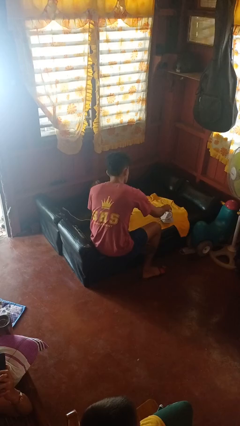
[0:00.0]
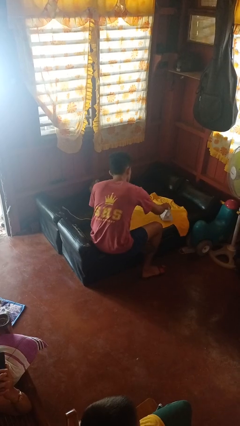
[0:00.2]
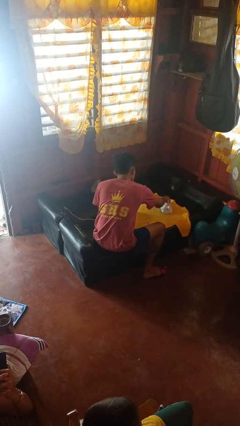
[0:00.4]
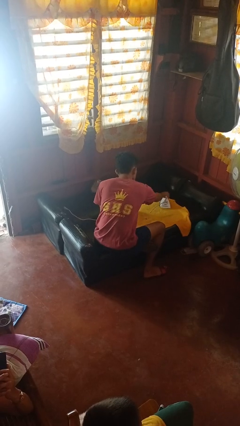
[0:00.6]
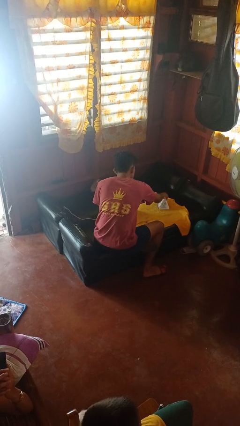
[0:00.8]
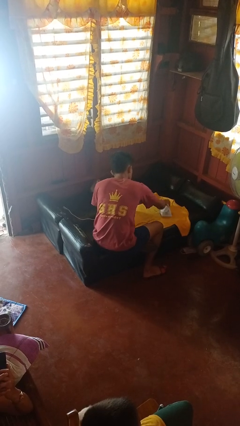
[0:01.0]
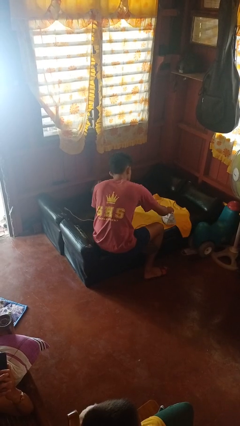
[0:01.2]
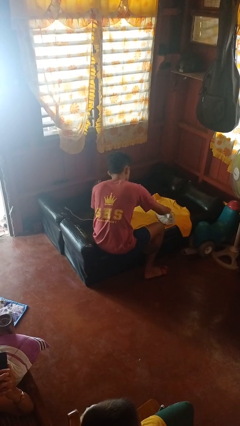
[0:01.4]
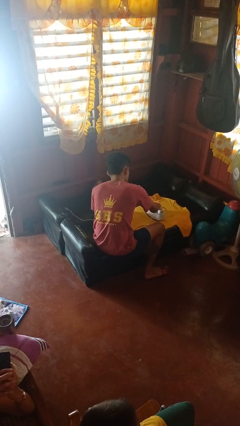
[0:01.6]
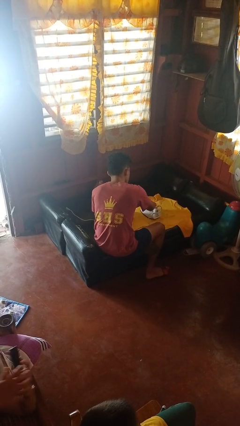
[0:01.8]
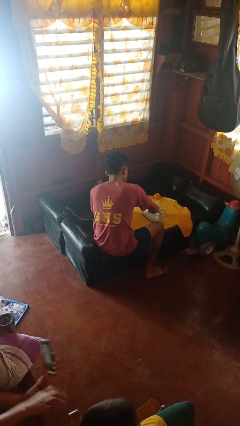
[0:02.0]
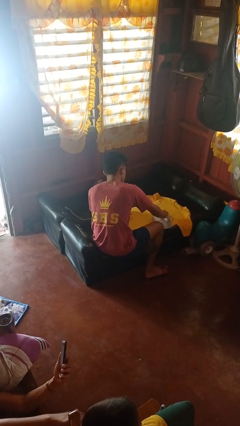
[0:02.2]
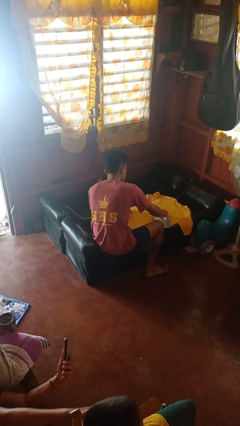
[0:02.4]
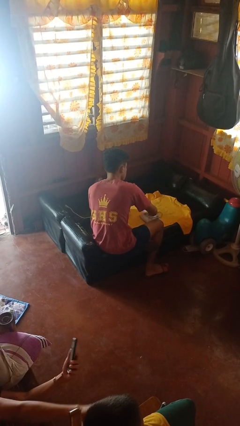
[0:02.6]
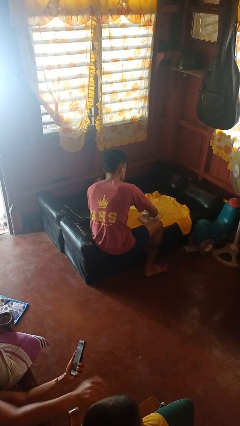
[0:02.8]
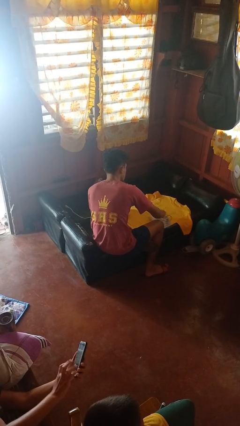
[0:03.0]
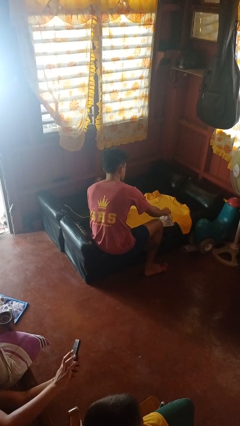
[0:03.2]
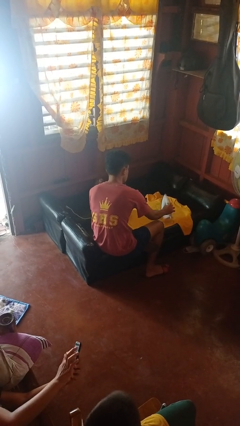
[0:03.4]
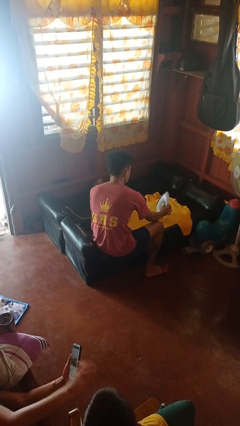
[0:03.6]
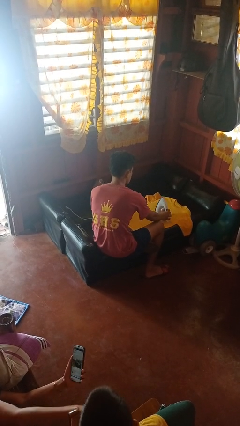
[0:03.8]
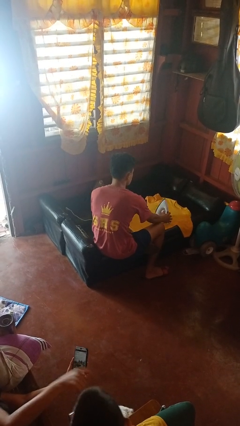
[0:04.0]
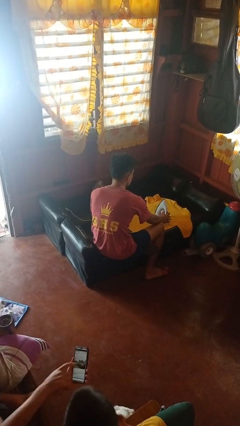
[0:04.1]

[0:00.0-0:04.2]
person irons clothes

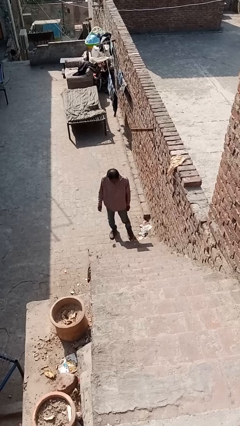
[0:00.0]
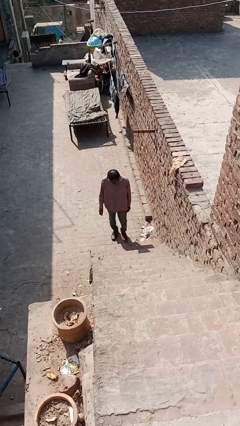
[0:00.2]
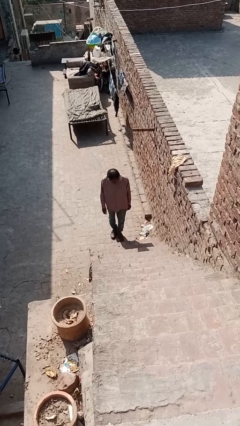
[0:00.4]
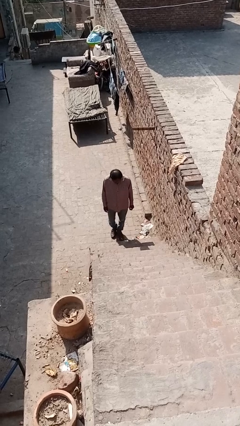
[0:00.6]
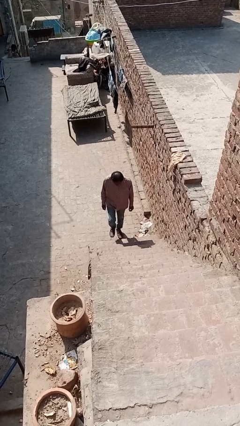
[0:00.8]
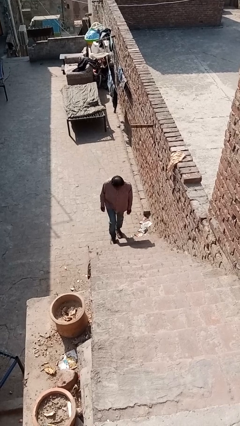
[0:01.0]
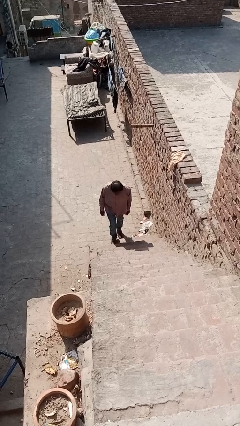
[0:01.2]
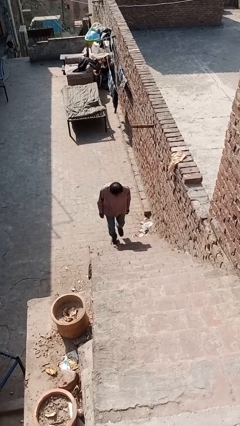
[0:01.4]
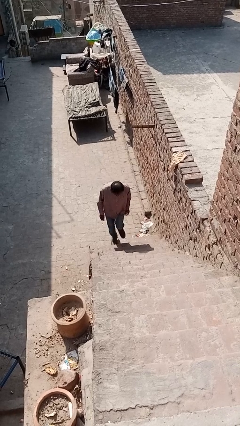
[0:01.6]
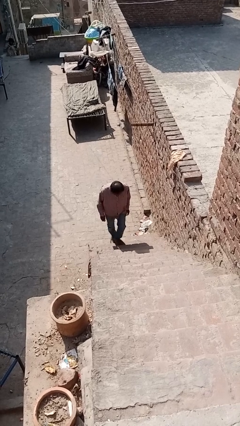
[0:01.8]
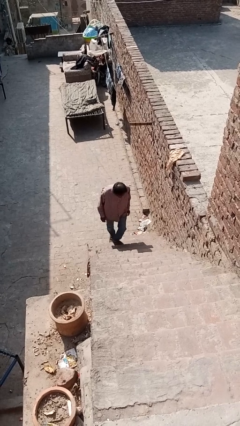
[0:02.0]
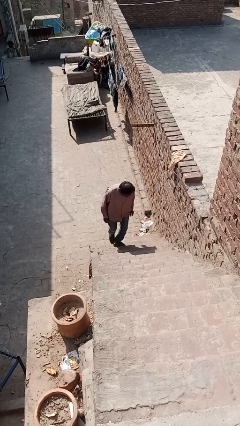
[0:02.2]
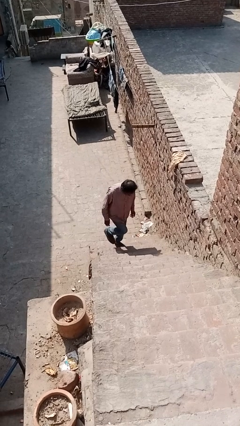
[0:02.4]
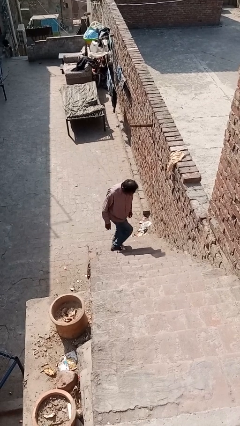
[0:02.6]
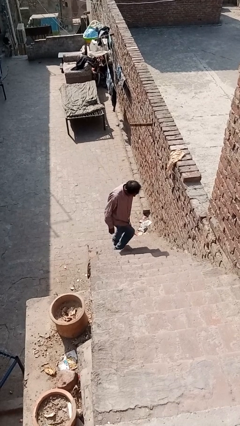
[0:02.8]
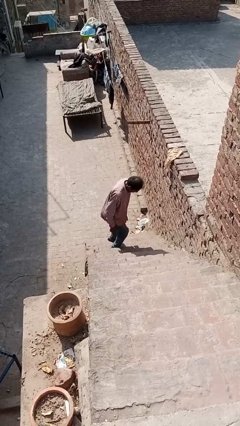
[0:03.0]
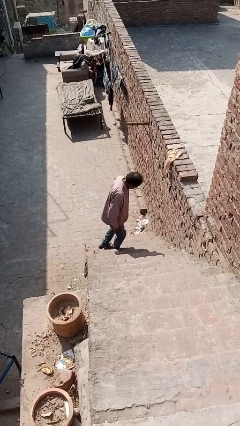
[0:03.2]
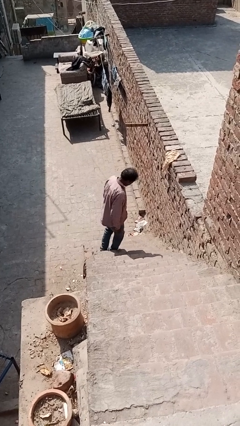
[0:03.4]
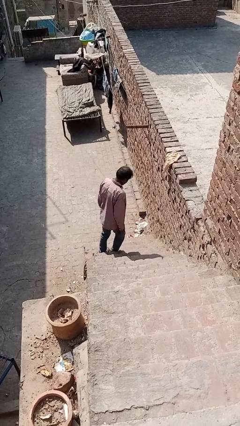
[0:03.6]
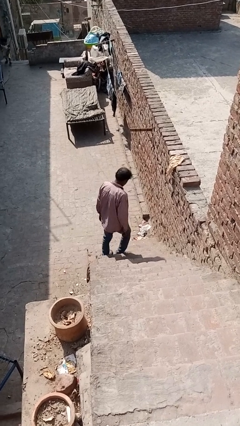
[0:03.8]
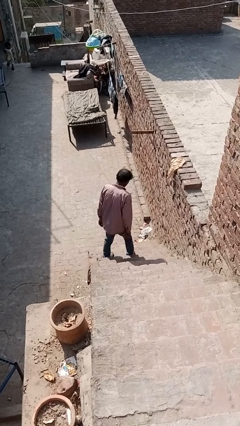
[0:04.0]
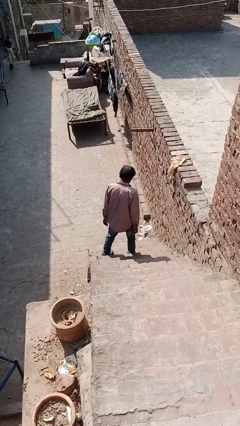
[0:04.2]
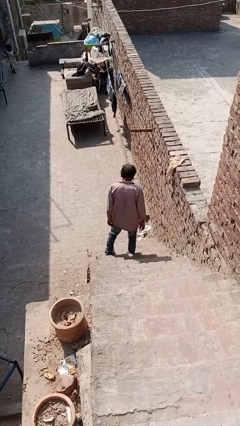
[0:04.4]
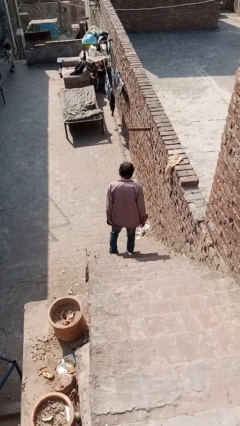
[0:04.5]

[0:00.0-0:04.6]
person climbs up stairs

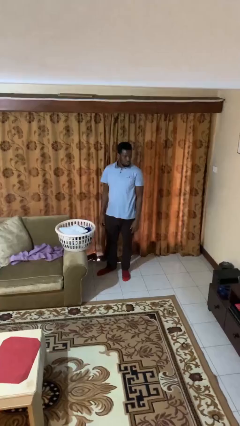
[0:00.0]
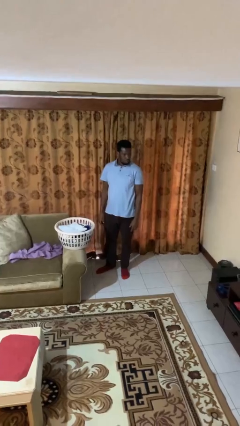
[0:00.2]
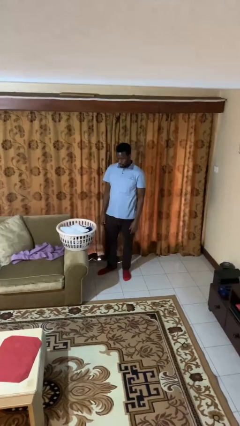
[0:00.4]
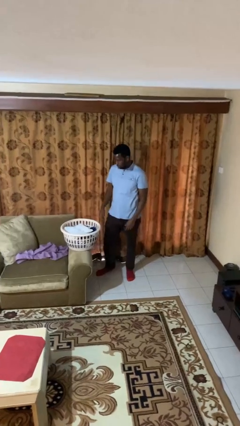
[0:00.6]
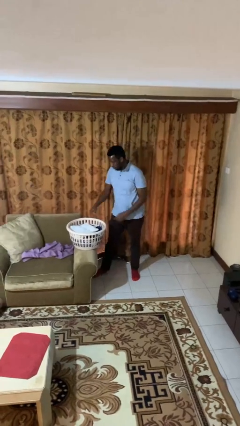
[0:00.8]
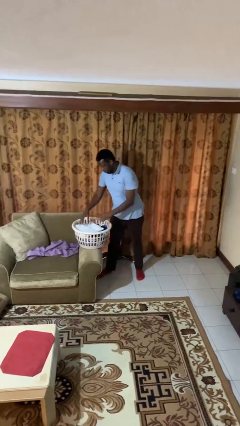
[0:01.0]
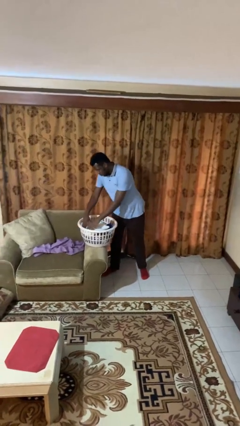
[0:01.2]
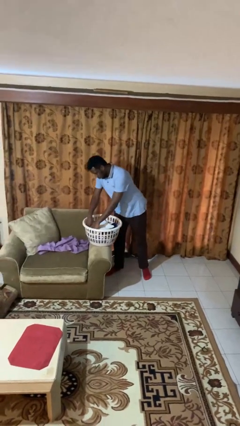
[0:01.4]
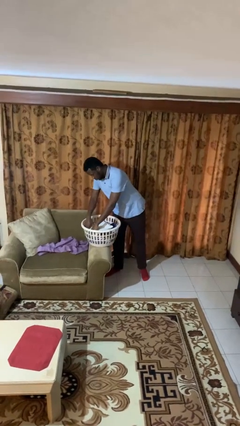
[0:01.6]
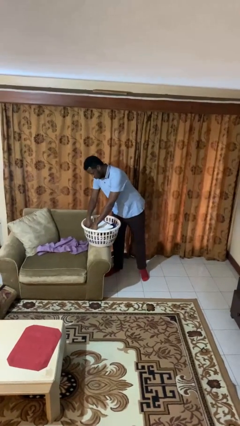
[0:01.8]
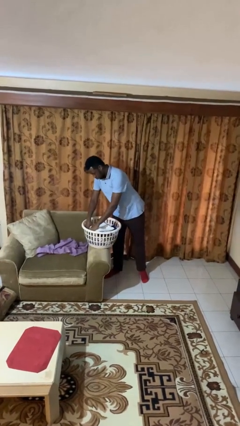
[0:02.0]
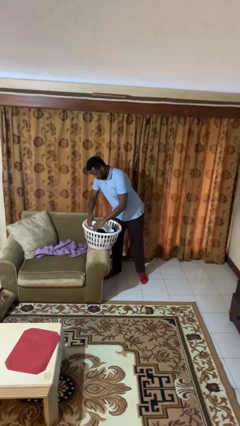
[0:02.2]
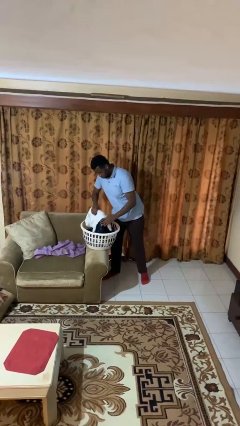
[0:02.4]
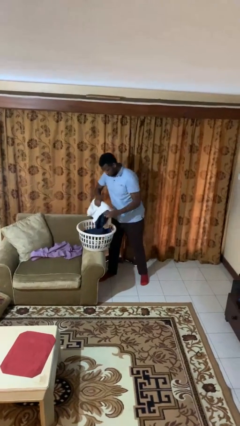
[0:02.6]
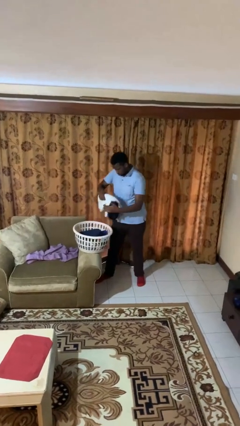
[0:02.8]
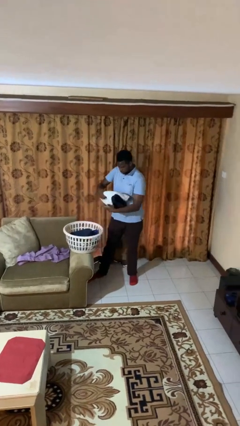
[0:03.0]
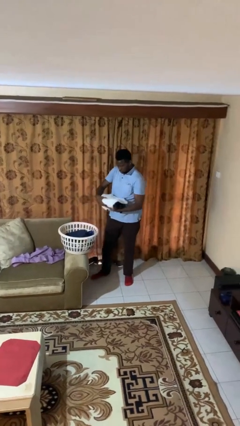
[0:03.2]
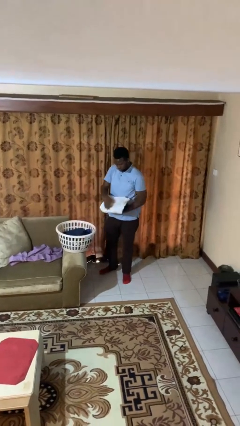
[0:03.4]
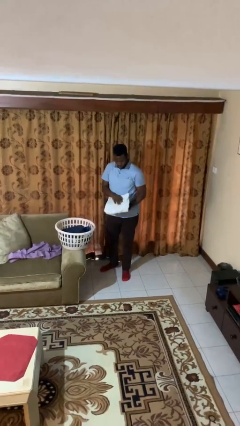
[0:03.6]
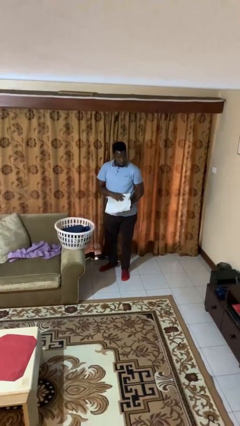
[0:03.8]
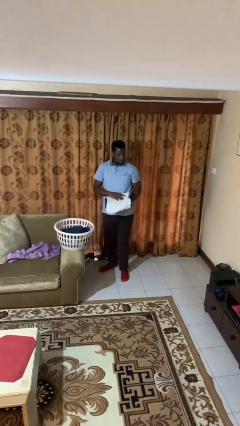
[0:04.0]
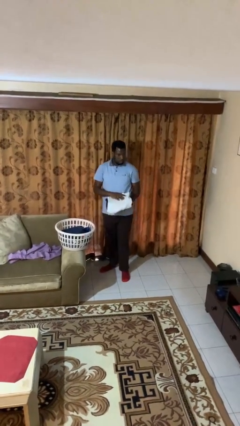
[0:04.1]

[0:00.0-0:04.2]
person takes object from basket

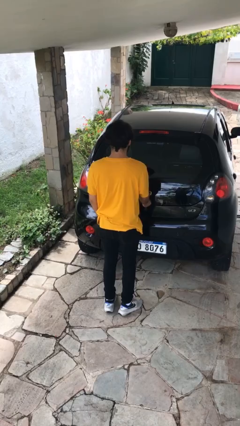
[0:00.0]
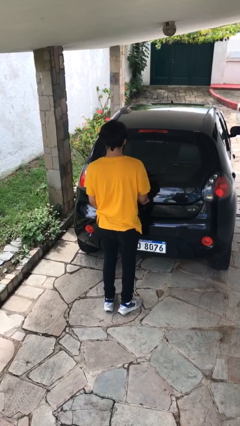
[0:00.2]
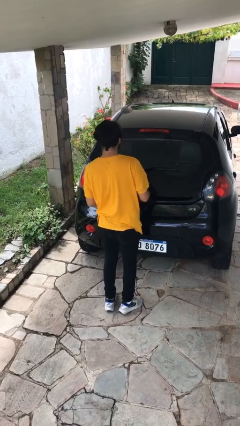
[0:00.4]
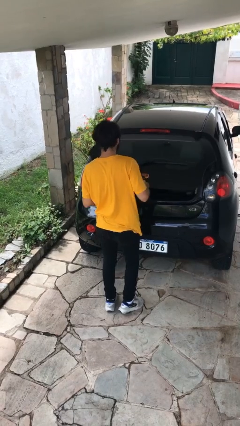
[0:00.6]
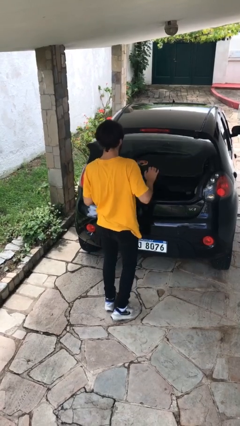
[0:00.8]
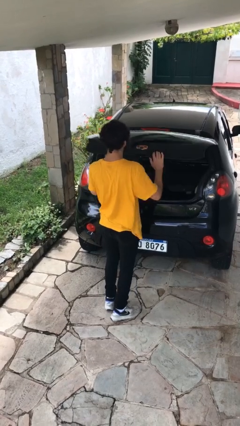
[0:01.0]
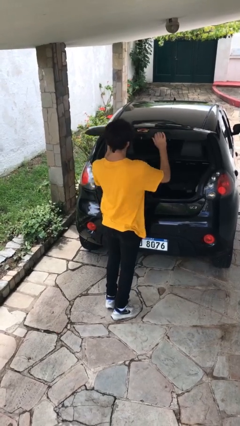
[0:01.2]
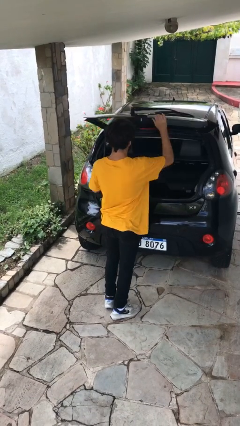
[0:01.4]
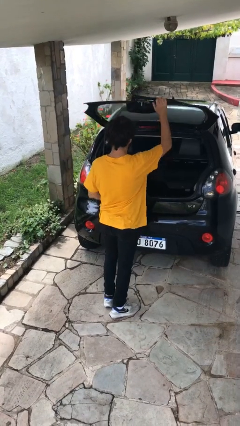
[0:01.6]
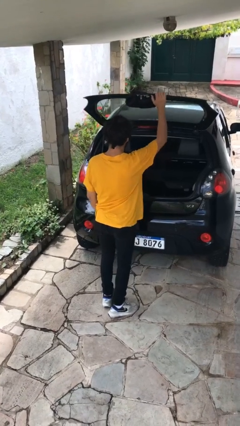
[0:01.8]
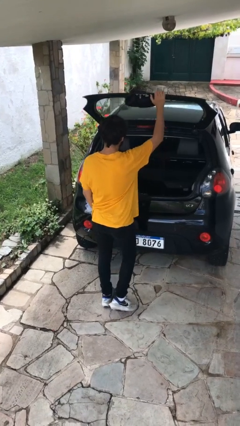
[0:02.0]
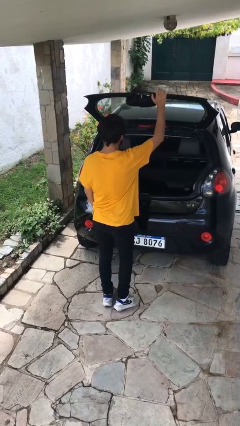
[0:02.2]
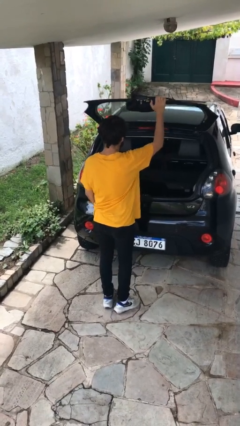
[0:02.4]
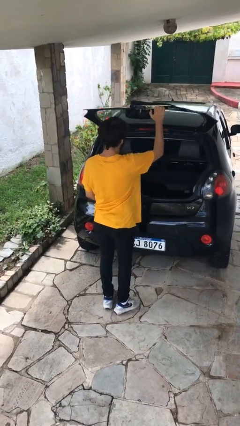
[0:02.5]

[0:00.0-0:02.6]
person opens car trunk

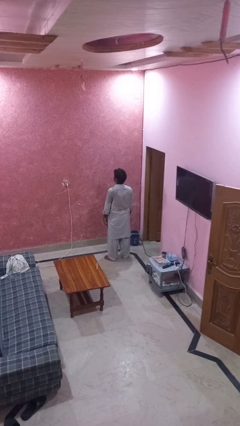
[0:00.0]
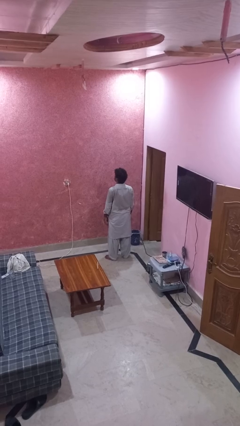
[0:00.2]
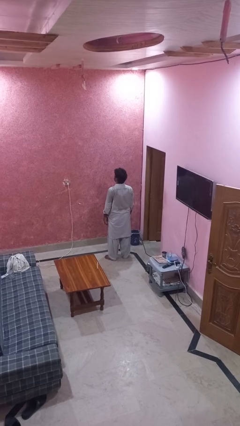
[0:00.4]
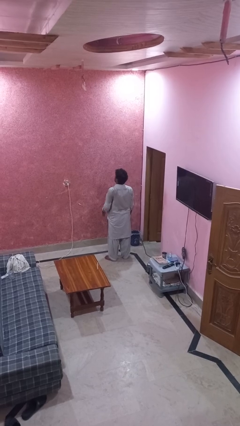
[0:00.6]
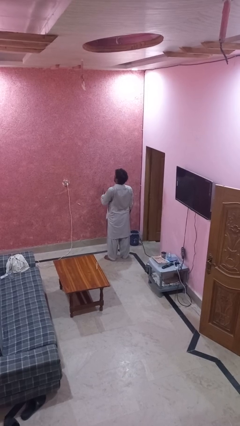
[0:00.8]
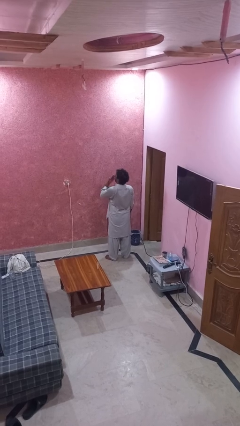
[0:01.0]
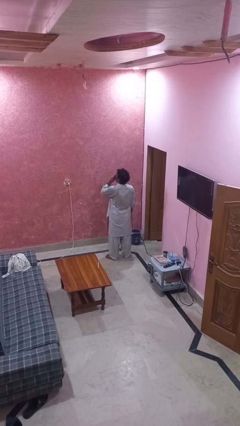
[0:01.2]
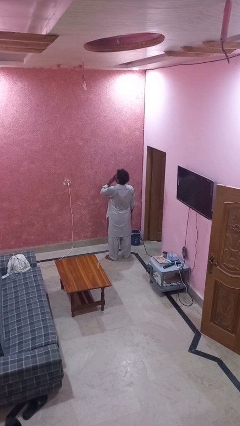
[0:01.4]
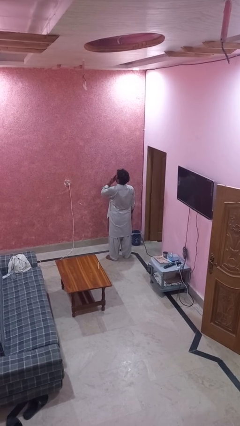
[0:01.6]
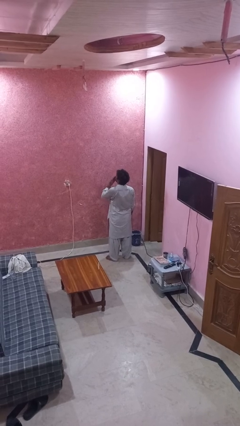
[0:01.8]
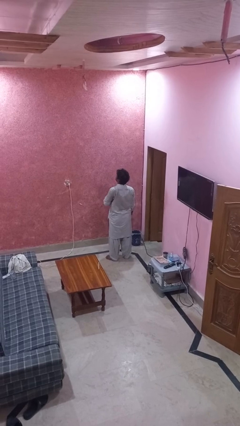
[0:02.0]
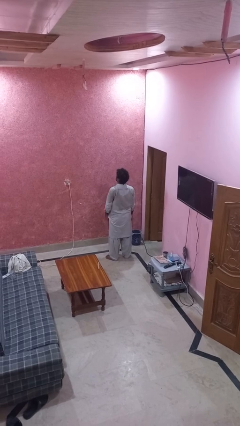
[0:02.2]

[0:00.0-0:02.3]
person yawns
